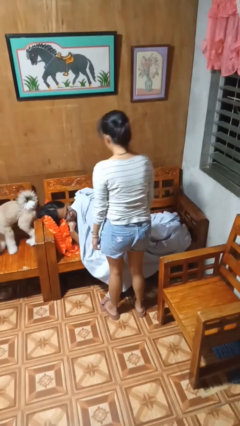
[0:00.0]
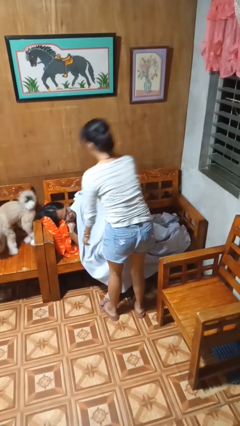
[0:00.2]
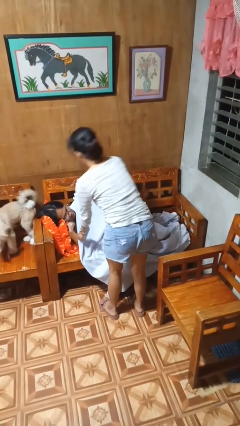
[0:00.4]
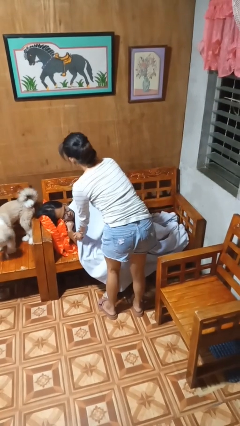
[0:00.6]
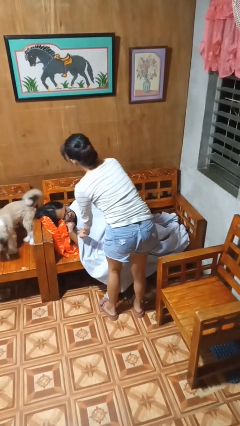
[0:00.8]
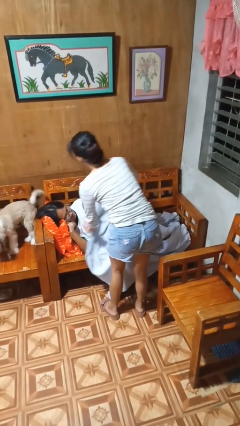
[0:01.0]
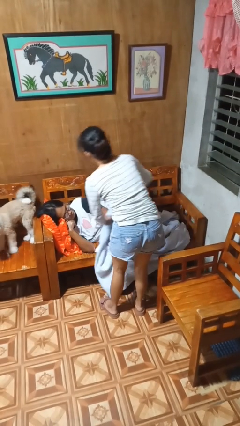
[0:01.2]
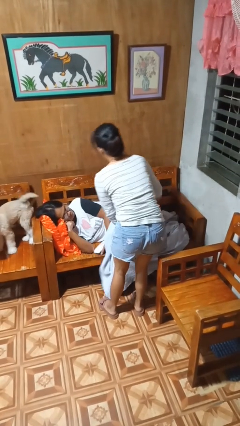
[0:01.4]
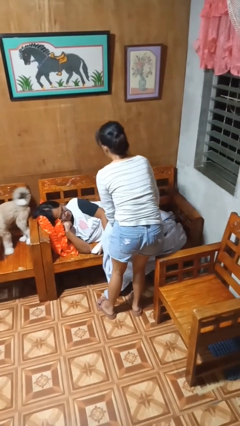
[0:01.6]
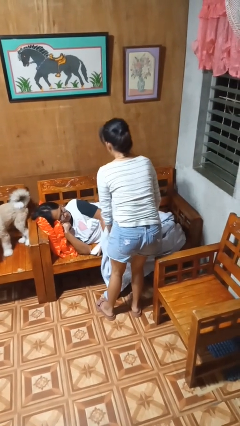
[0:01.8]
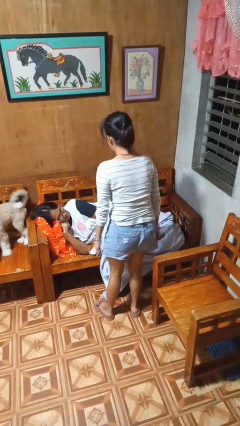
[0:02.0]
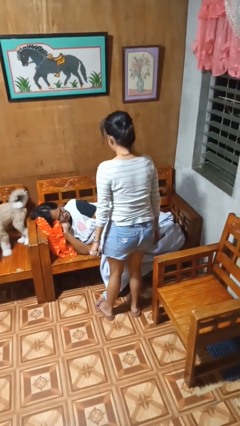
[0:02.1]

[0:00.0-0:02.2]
person uncovers friend with blanket

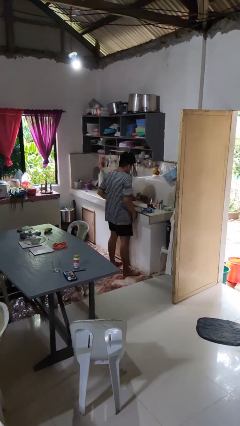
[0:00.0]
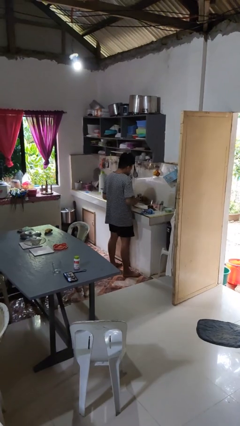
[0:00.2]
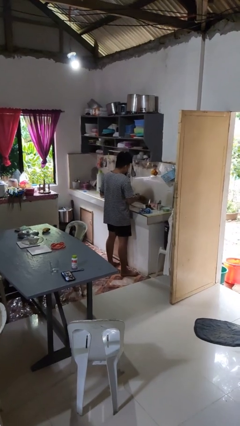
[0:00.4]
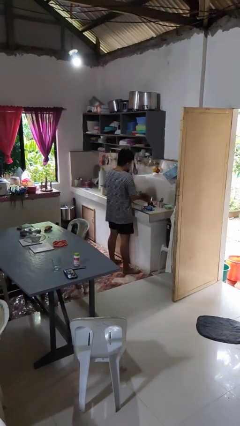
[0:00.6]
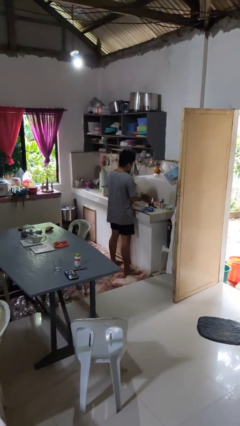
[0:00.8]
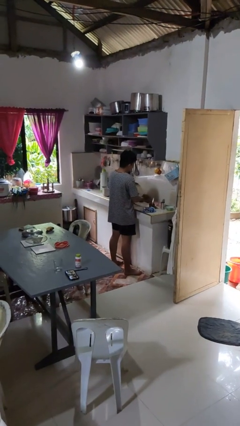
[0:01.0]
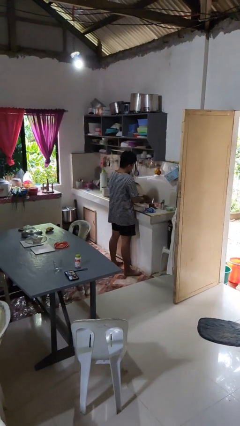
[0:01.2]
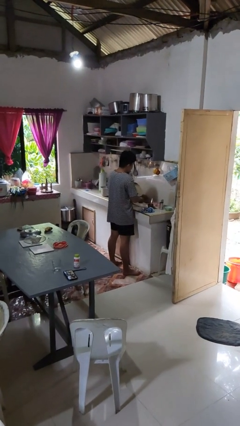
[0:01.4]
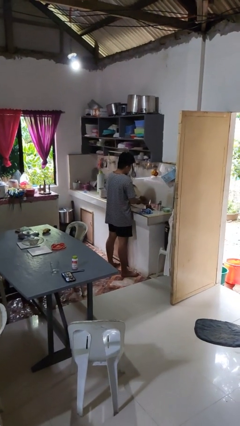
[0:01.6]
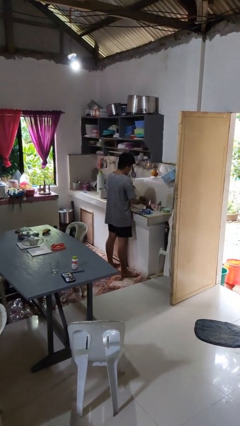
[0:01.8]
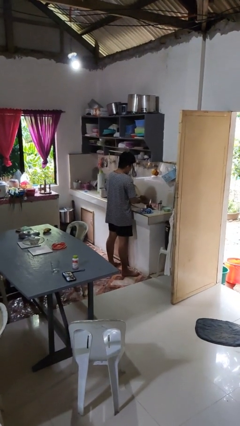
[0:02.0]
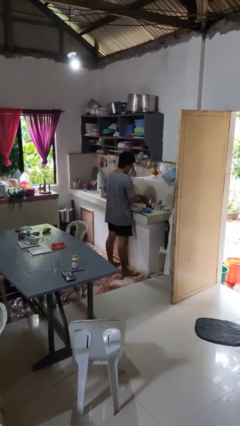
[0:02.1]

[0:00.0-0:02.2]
person washes hands

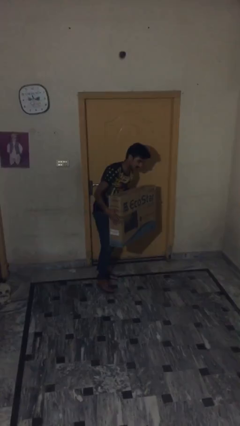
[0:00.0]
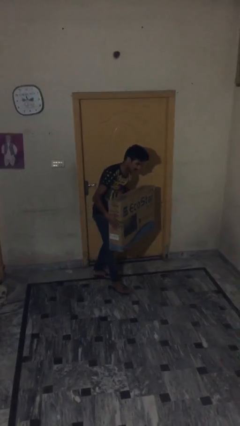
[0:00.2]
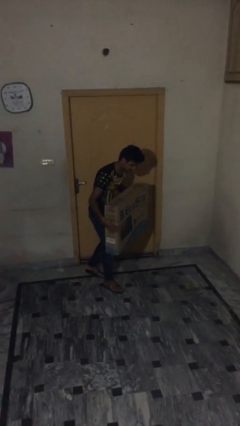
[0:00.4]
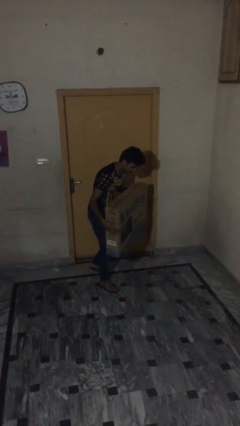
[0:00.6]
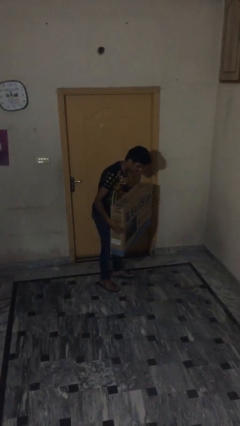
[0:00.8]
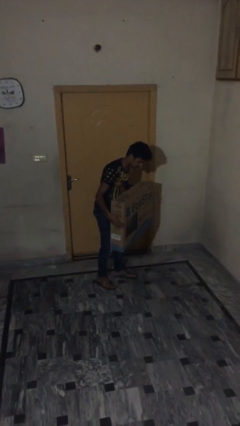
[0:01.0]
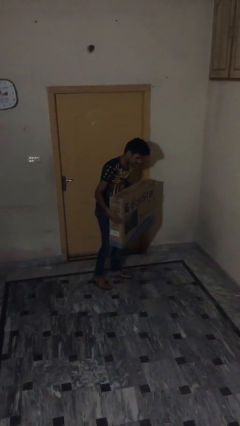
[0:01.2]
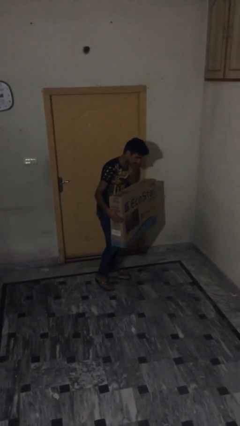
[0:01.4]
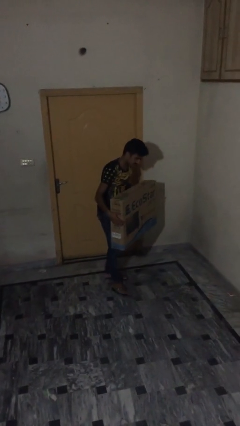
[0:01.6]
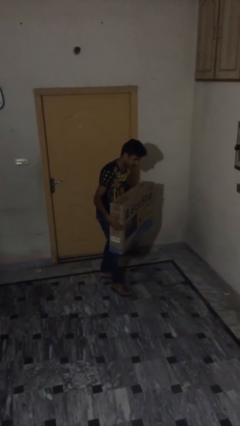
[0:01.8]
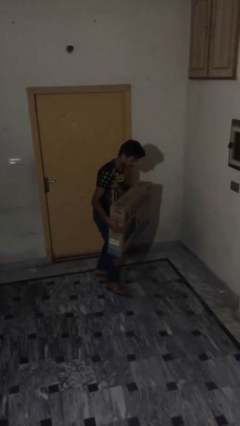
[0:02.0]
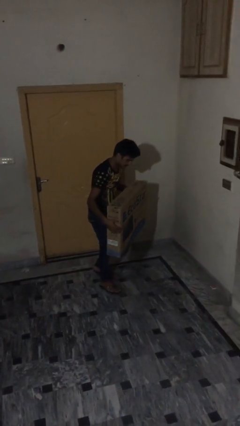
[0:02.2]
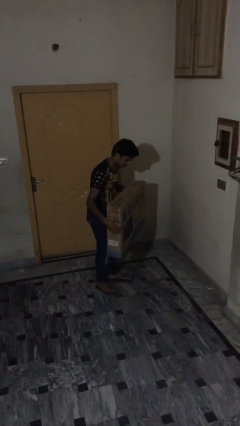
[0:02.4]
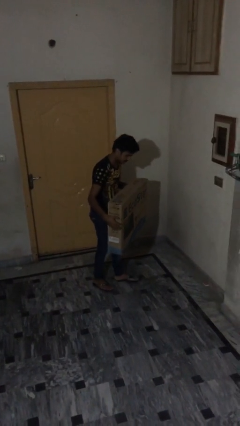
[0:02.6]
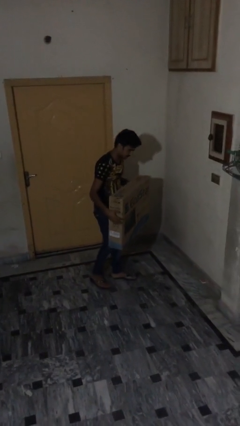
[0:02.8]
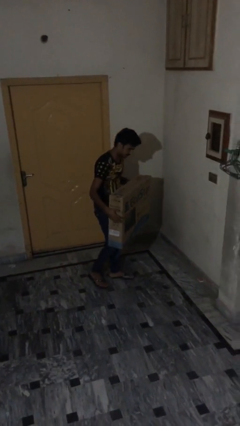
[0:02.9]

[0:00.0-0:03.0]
person carries heavy object

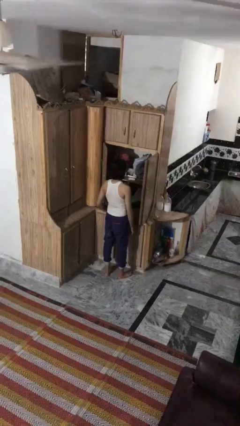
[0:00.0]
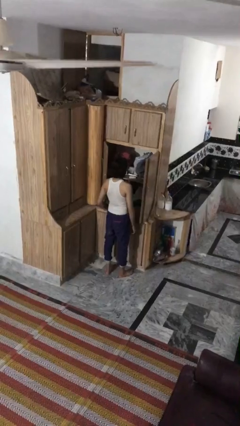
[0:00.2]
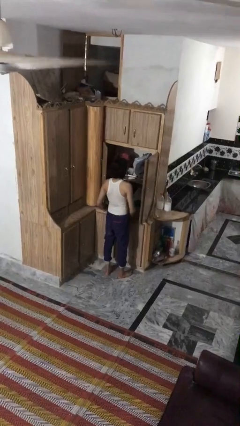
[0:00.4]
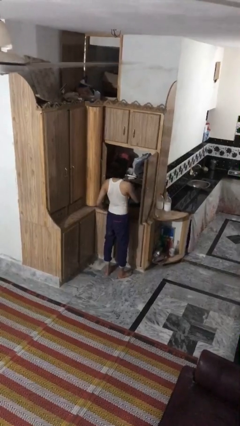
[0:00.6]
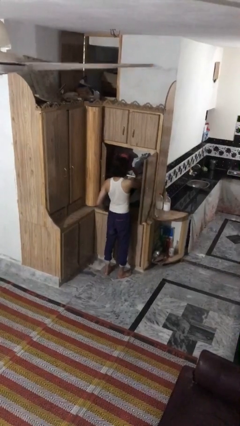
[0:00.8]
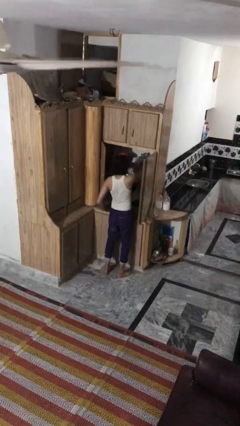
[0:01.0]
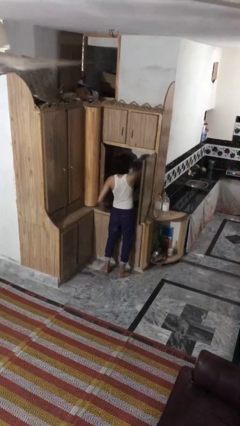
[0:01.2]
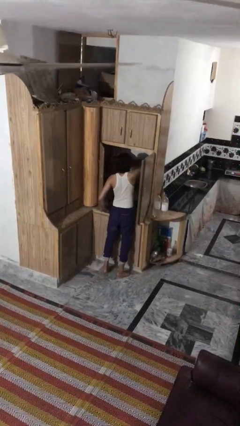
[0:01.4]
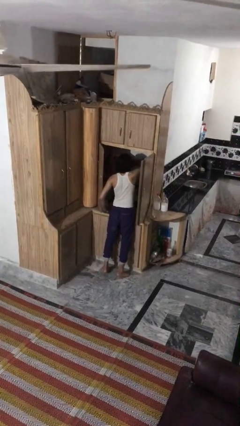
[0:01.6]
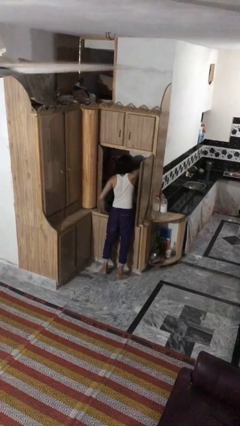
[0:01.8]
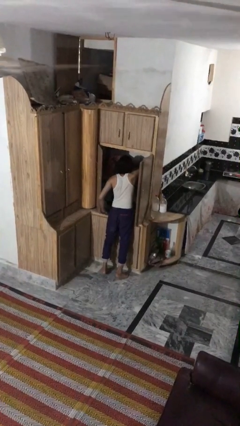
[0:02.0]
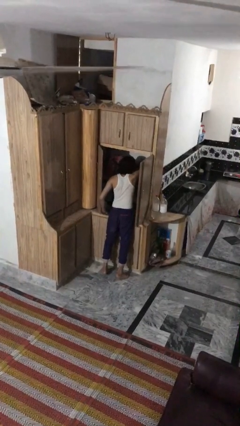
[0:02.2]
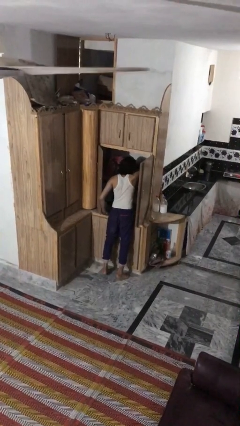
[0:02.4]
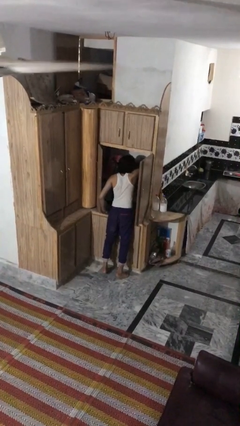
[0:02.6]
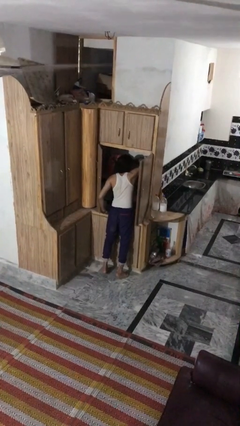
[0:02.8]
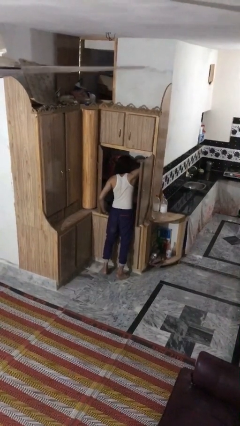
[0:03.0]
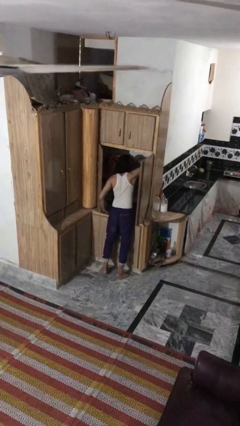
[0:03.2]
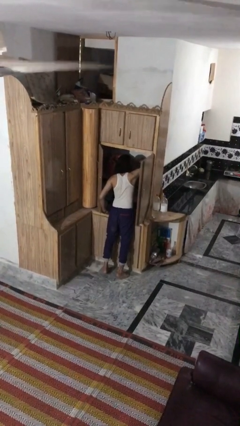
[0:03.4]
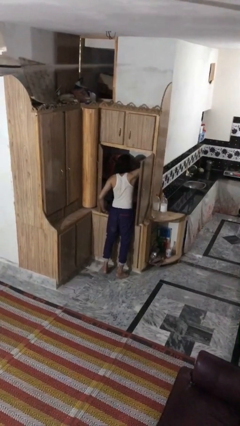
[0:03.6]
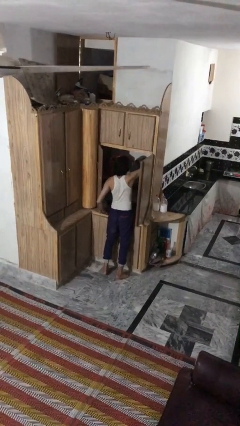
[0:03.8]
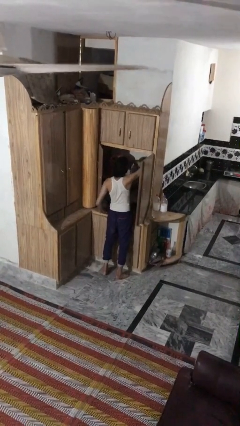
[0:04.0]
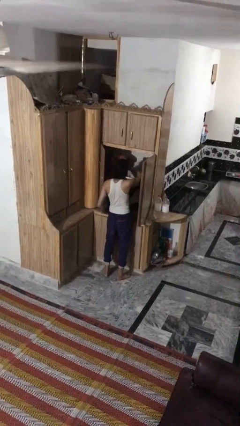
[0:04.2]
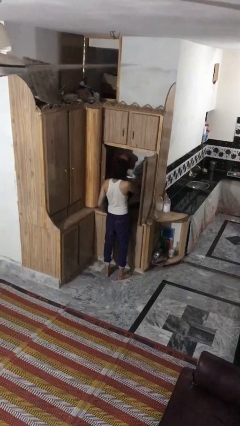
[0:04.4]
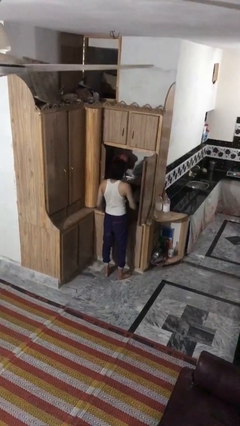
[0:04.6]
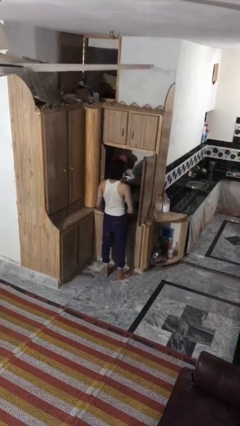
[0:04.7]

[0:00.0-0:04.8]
person searches in cabinet

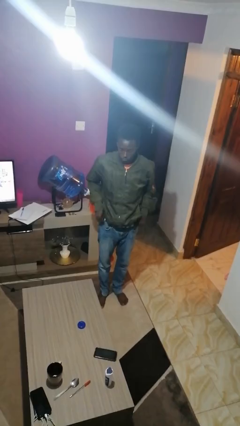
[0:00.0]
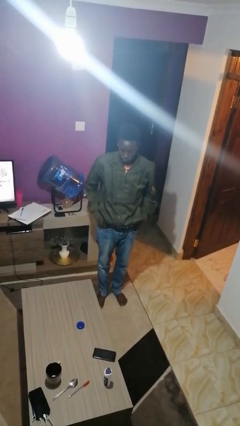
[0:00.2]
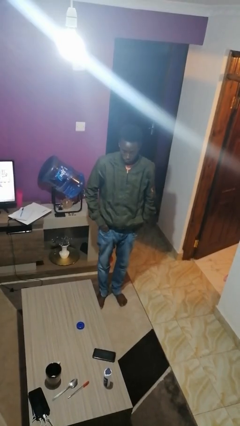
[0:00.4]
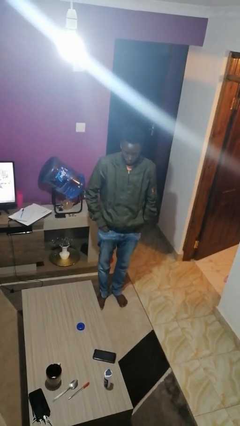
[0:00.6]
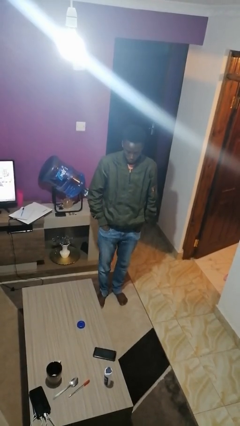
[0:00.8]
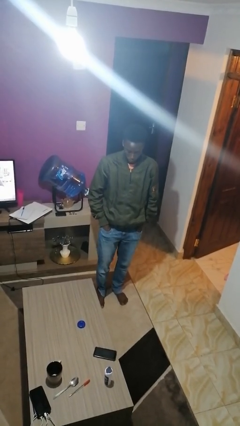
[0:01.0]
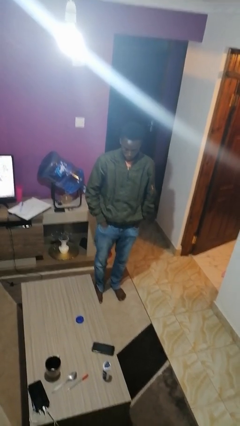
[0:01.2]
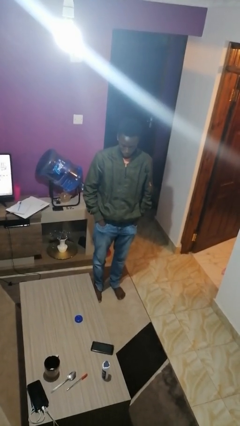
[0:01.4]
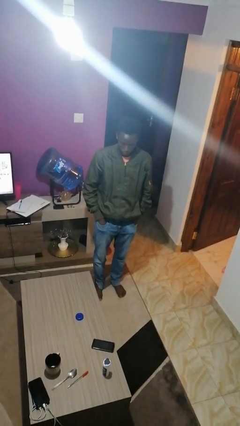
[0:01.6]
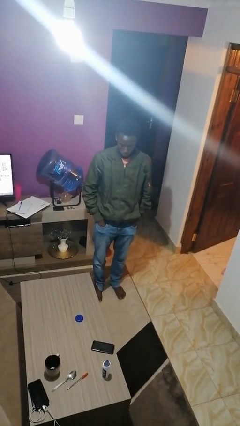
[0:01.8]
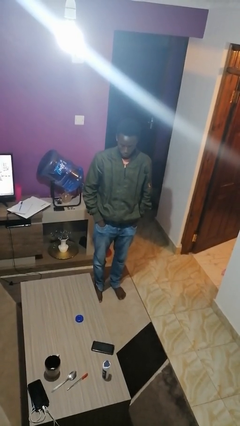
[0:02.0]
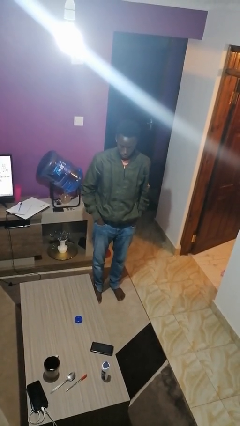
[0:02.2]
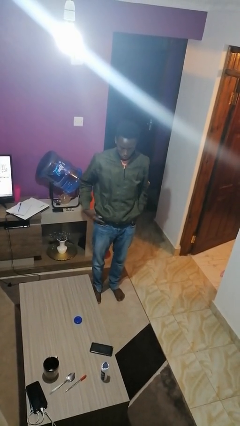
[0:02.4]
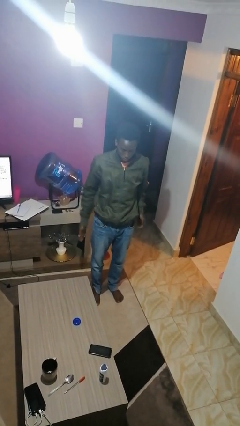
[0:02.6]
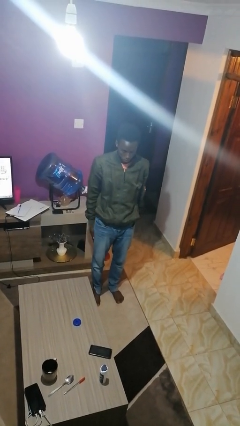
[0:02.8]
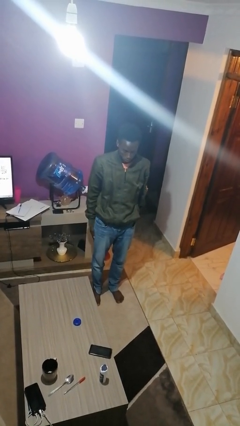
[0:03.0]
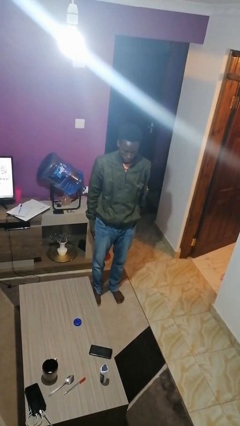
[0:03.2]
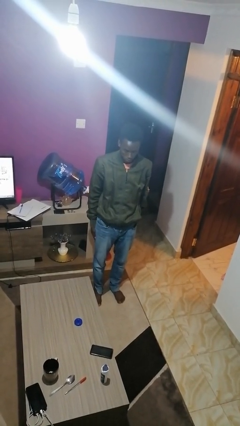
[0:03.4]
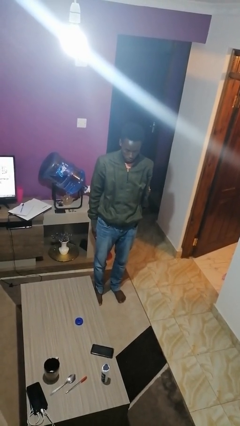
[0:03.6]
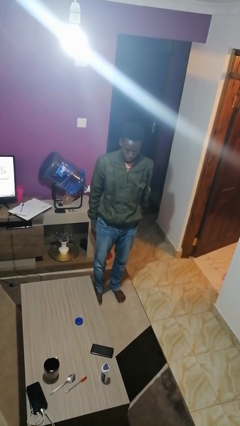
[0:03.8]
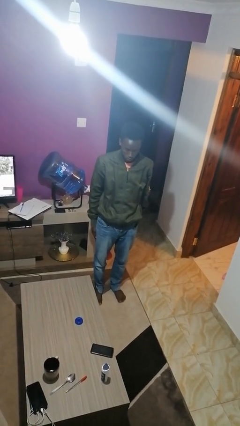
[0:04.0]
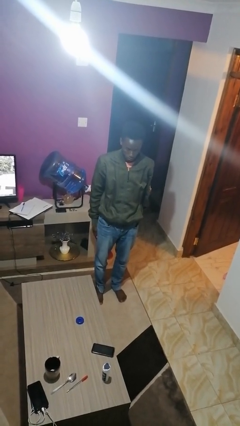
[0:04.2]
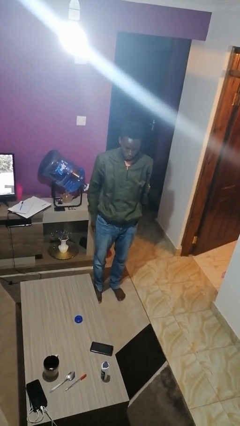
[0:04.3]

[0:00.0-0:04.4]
person puts hands in back pockets

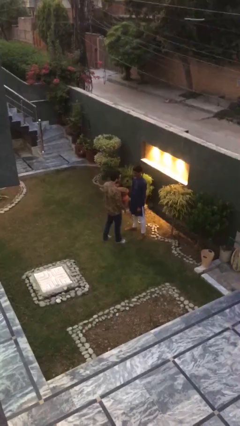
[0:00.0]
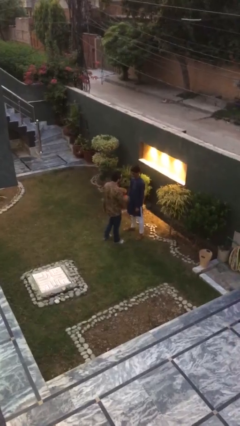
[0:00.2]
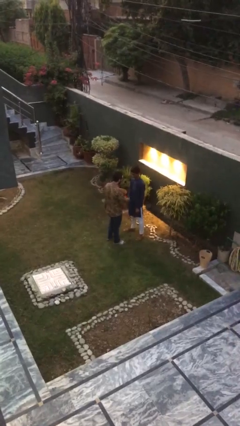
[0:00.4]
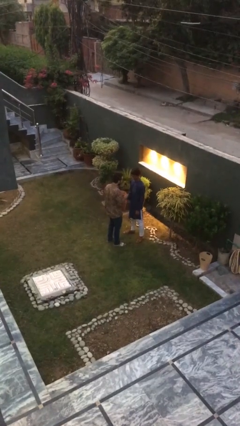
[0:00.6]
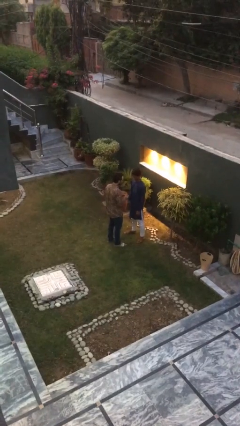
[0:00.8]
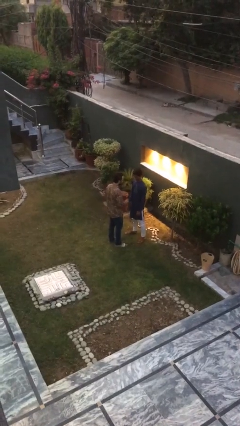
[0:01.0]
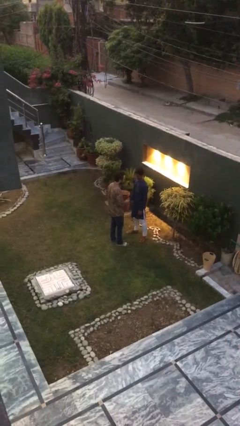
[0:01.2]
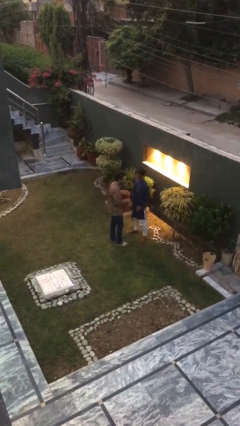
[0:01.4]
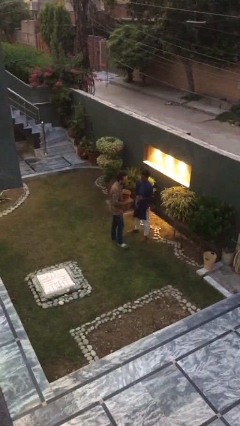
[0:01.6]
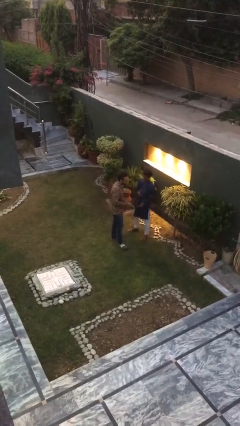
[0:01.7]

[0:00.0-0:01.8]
person shakes hand
